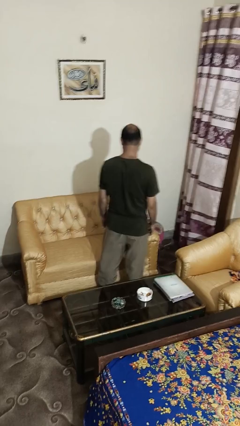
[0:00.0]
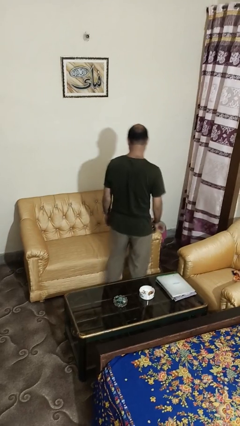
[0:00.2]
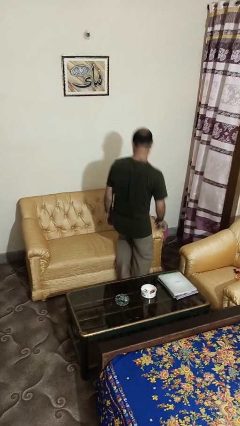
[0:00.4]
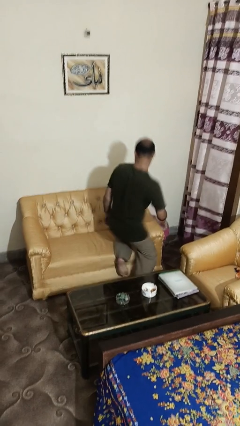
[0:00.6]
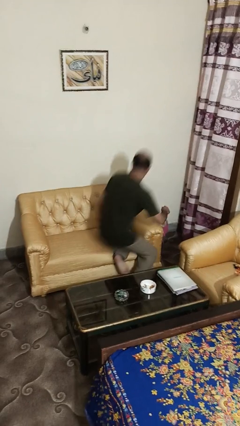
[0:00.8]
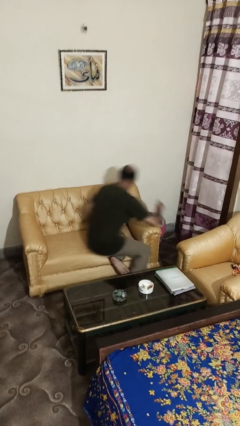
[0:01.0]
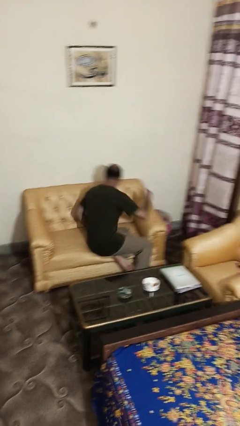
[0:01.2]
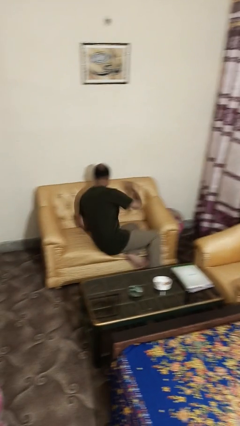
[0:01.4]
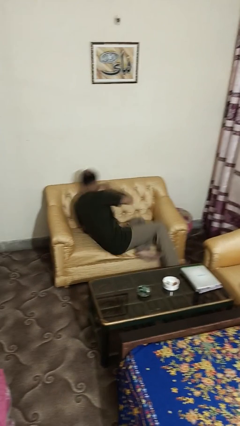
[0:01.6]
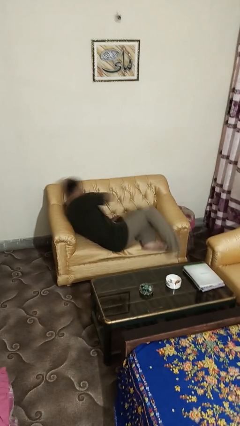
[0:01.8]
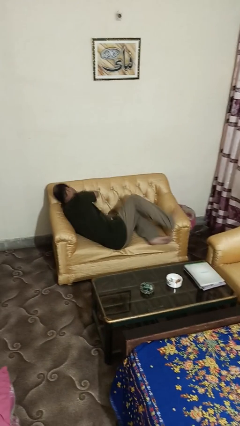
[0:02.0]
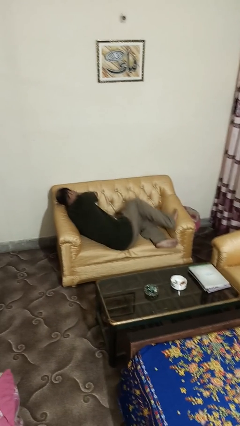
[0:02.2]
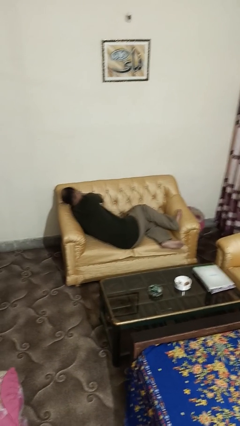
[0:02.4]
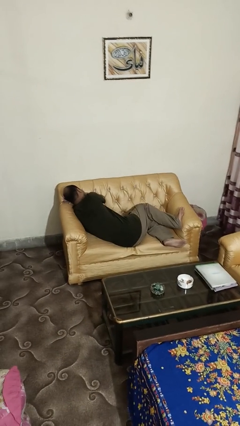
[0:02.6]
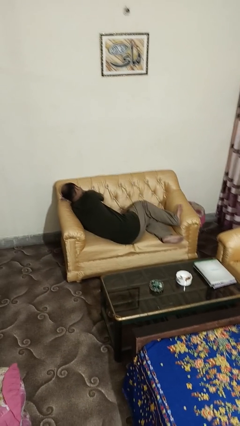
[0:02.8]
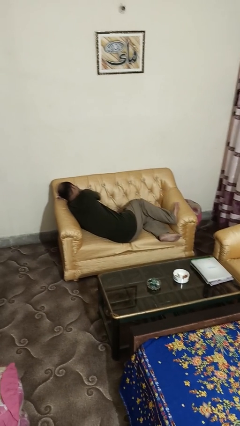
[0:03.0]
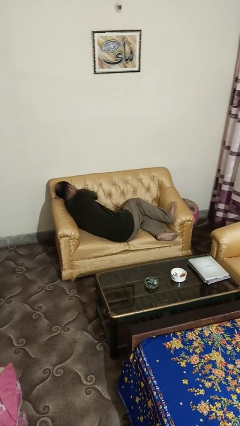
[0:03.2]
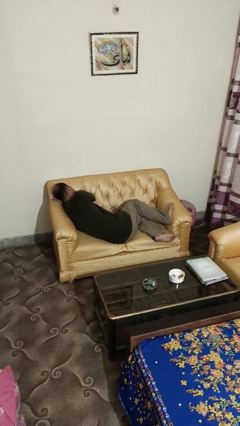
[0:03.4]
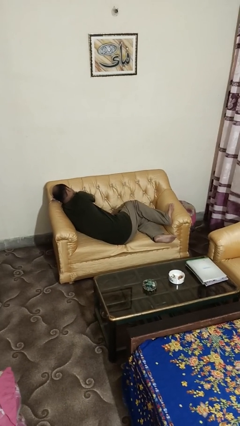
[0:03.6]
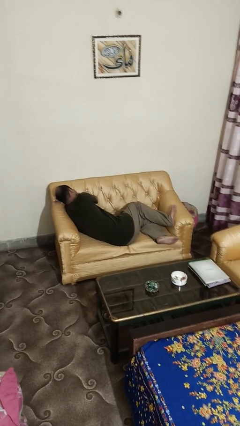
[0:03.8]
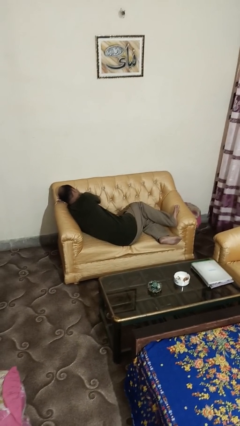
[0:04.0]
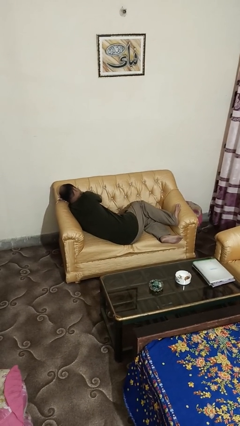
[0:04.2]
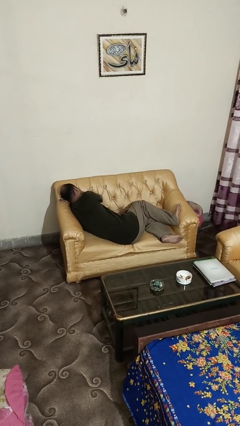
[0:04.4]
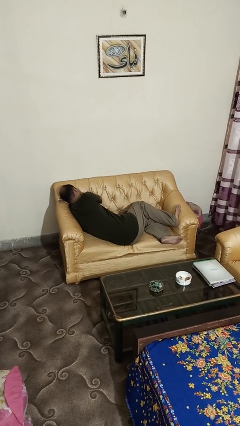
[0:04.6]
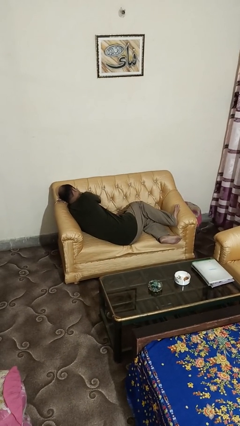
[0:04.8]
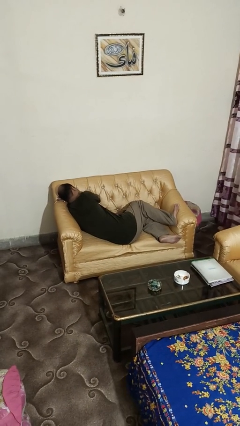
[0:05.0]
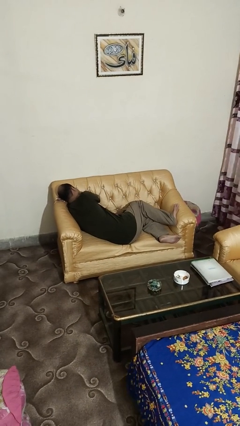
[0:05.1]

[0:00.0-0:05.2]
person lies down on couch

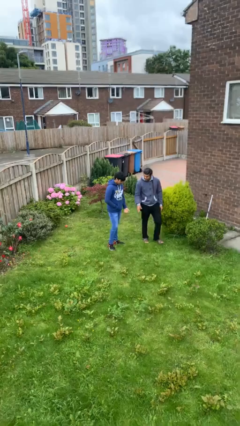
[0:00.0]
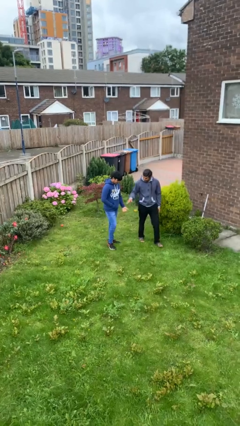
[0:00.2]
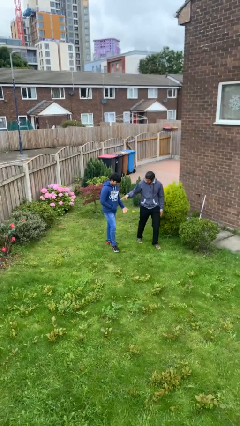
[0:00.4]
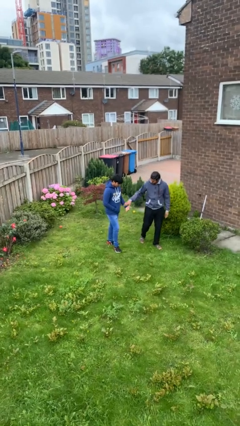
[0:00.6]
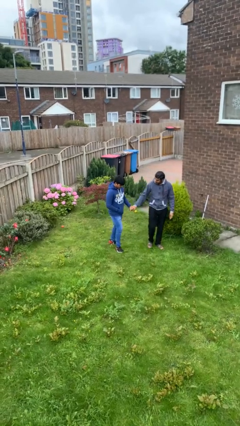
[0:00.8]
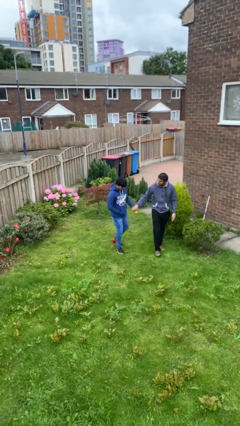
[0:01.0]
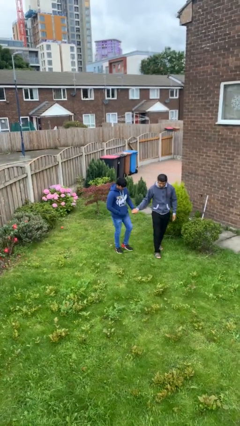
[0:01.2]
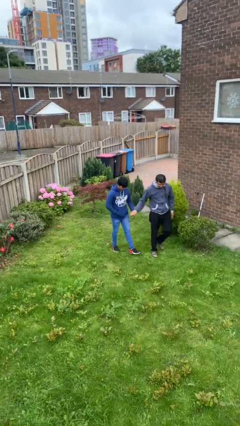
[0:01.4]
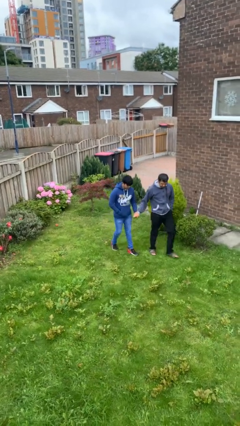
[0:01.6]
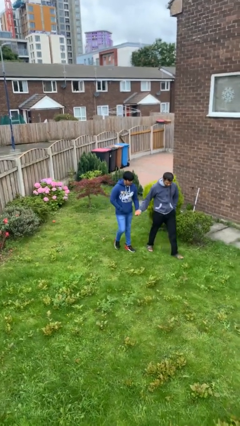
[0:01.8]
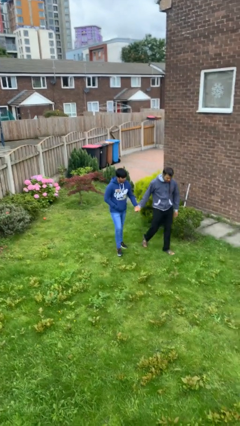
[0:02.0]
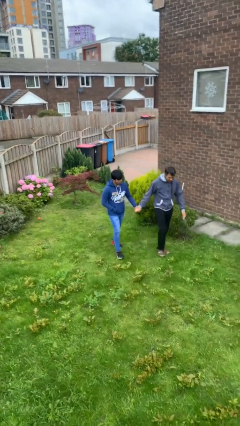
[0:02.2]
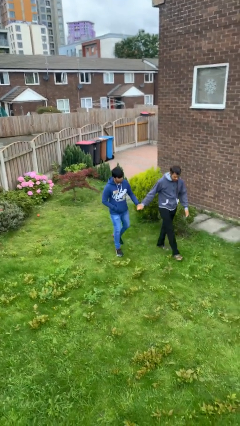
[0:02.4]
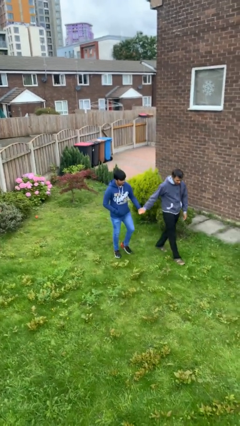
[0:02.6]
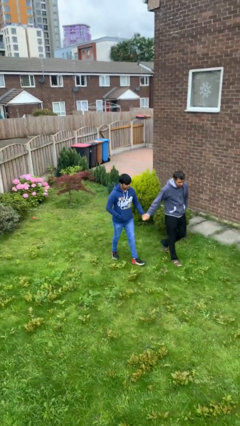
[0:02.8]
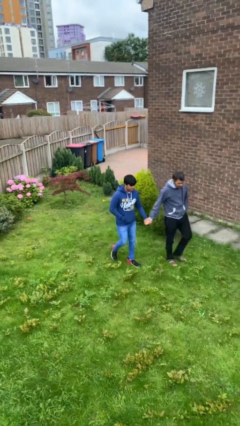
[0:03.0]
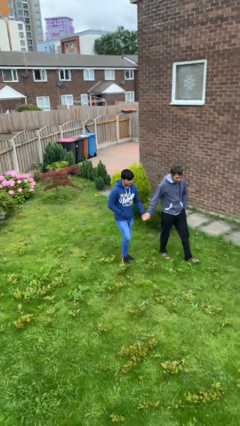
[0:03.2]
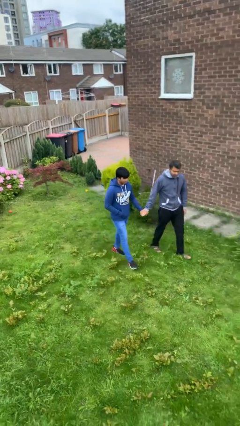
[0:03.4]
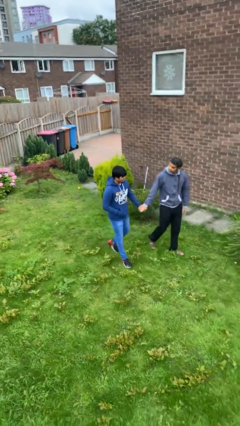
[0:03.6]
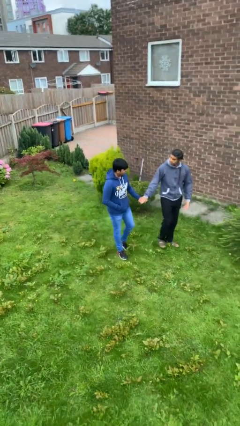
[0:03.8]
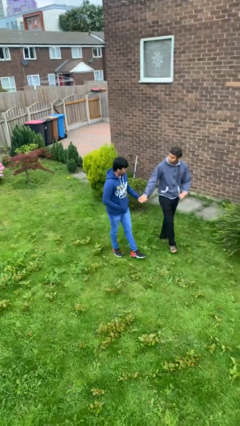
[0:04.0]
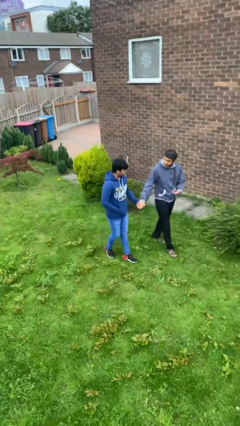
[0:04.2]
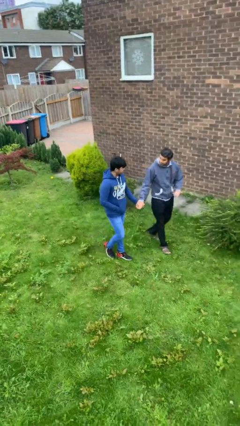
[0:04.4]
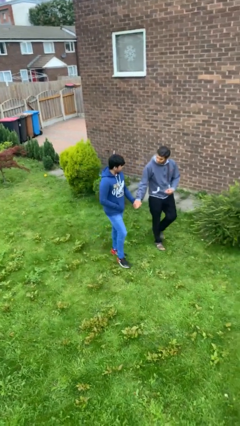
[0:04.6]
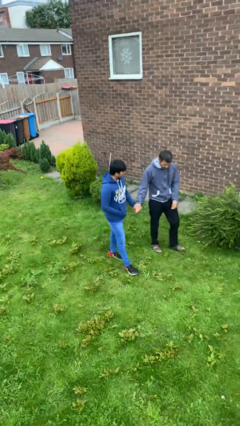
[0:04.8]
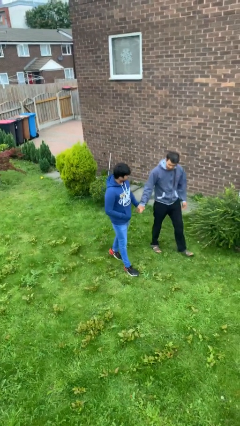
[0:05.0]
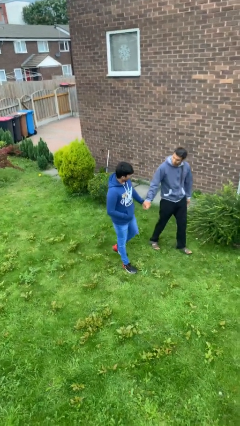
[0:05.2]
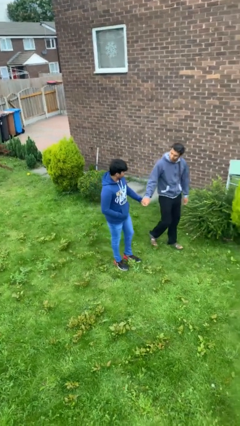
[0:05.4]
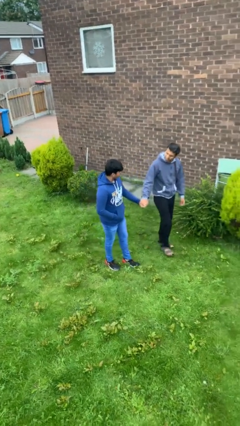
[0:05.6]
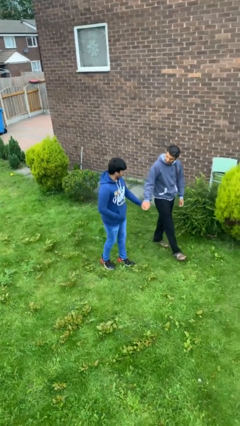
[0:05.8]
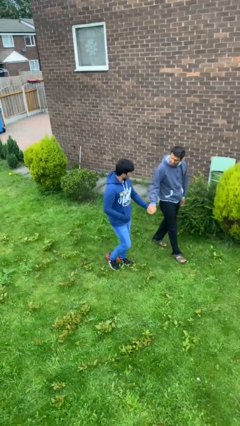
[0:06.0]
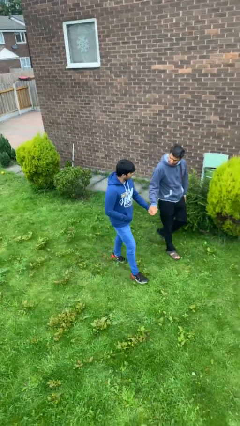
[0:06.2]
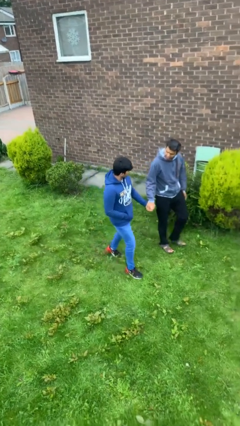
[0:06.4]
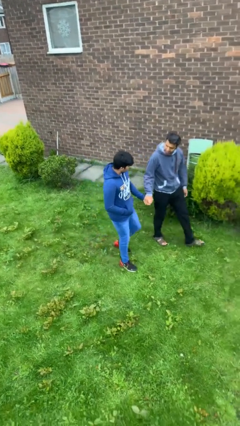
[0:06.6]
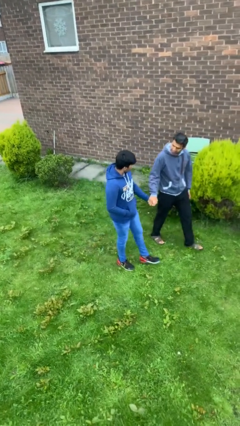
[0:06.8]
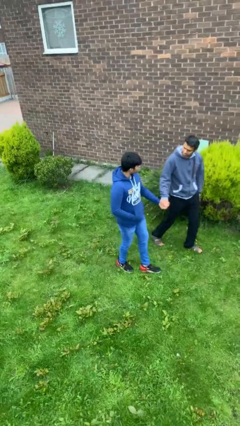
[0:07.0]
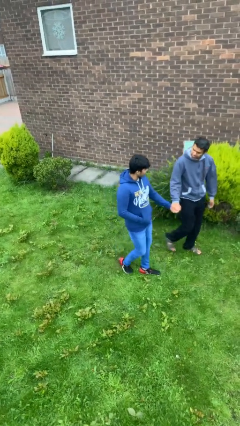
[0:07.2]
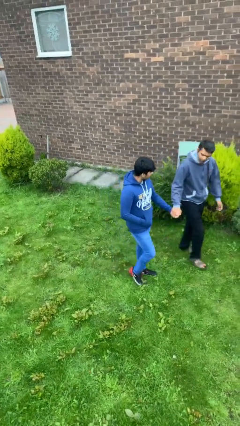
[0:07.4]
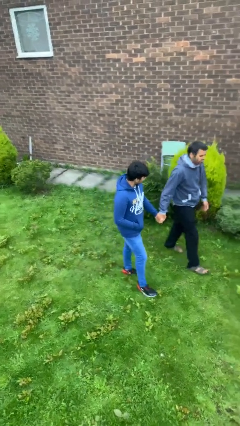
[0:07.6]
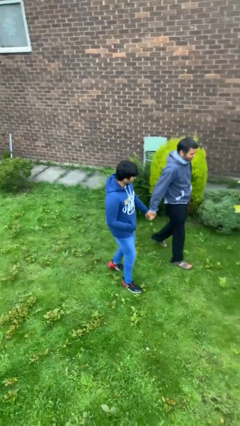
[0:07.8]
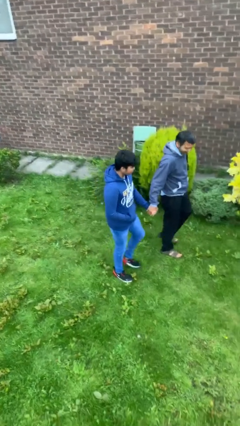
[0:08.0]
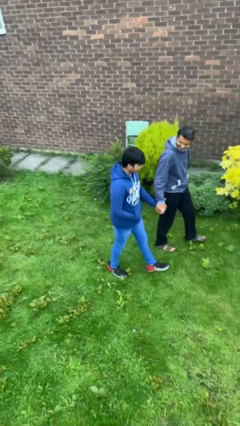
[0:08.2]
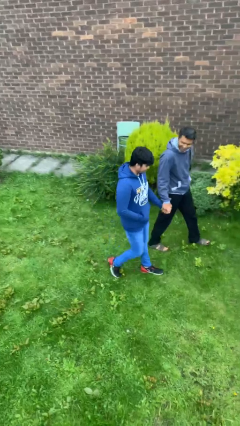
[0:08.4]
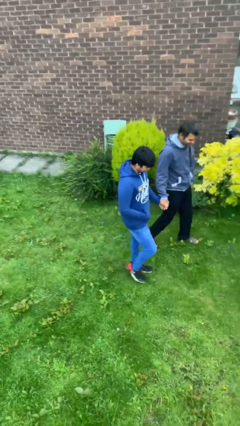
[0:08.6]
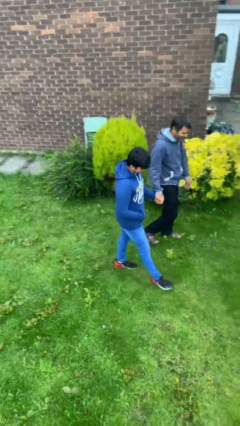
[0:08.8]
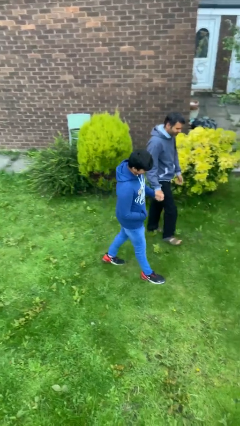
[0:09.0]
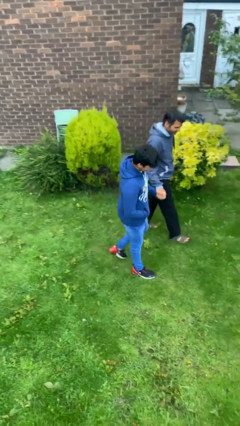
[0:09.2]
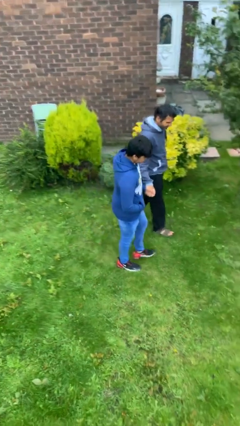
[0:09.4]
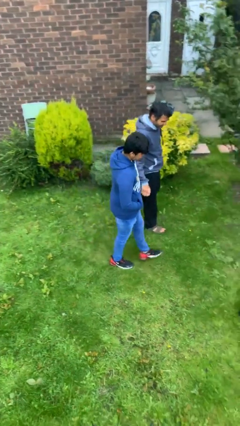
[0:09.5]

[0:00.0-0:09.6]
person holds hand

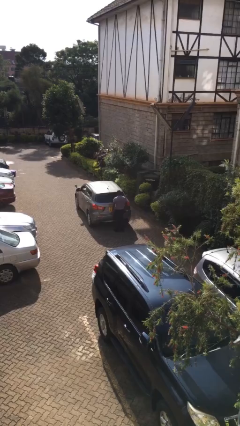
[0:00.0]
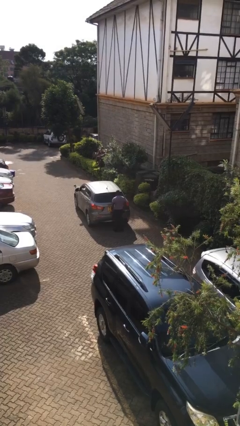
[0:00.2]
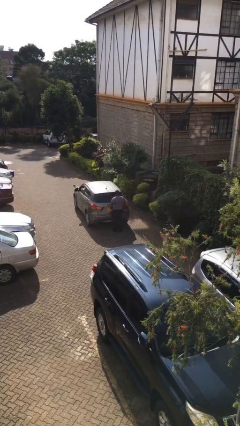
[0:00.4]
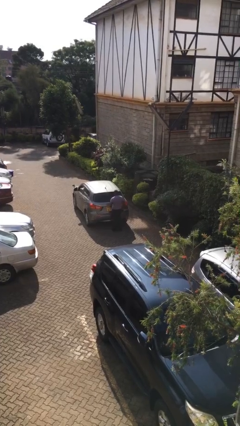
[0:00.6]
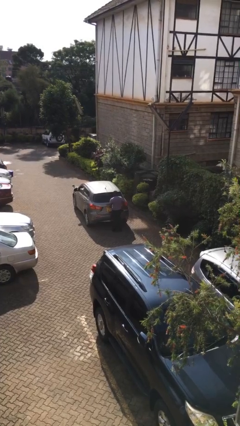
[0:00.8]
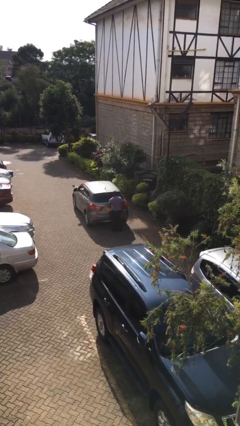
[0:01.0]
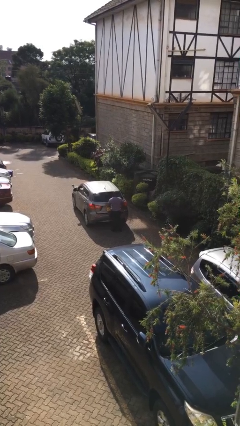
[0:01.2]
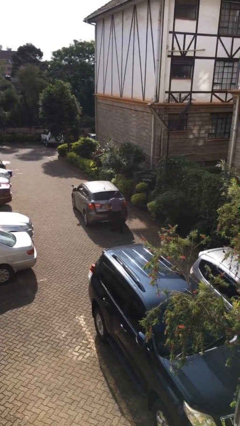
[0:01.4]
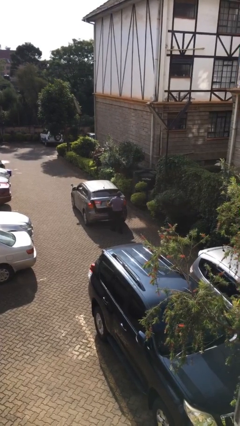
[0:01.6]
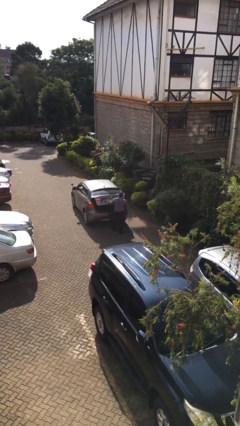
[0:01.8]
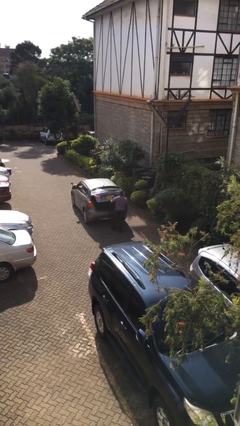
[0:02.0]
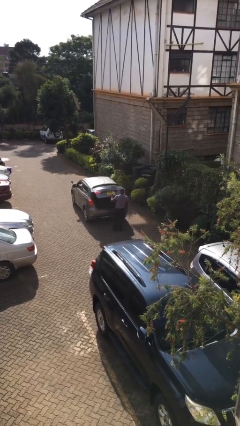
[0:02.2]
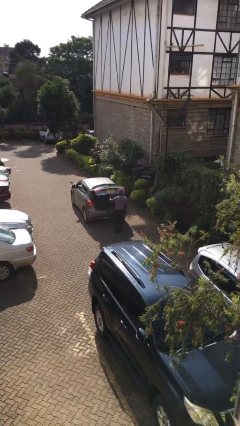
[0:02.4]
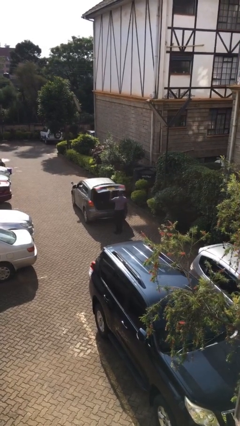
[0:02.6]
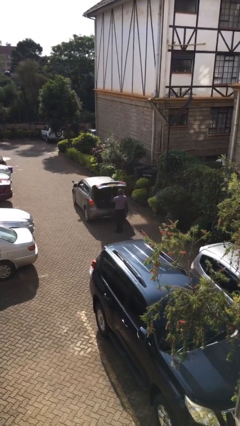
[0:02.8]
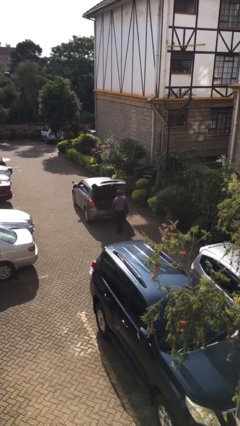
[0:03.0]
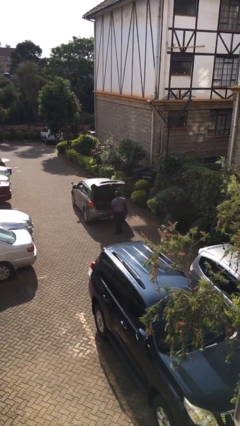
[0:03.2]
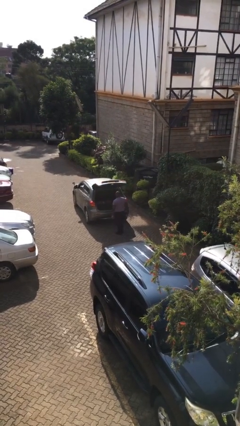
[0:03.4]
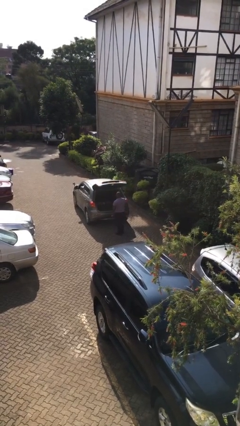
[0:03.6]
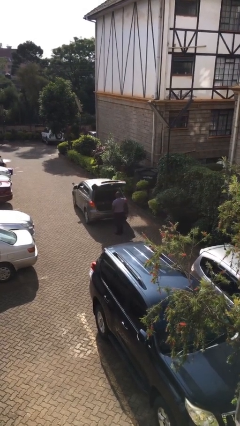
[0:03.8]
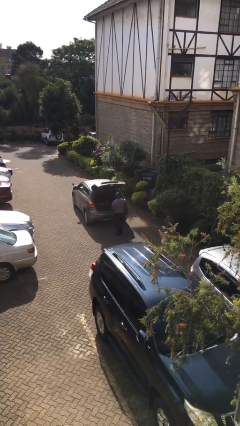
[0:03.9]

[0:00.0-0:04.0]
person opens car trunk
